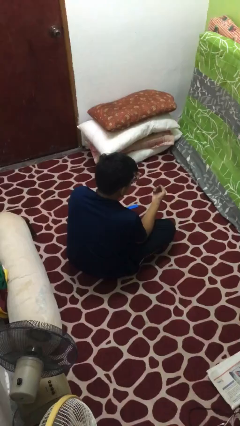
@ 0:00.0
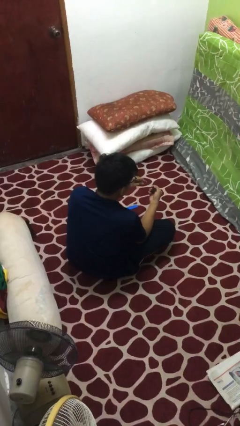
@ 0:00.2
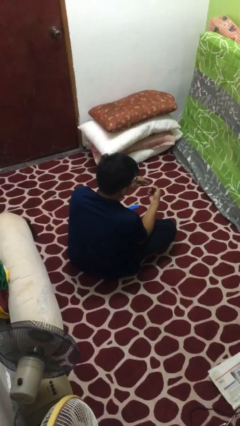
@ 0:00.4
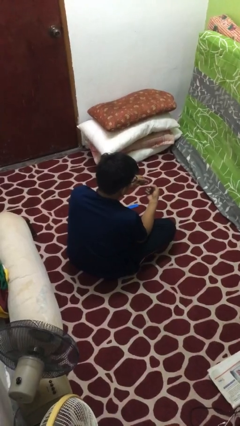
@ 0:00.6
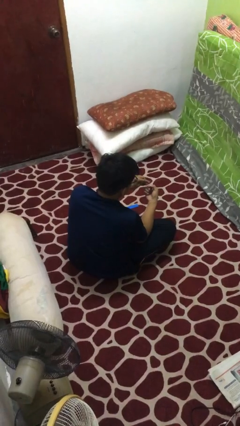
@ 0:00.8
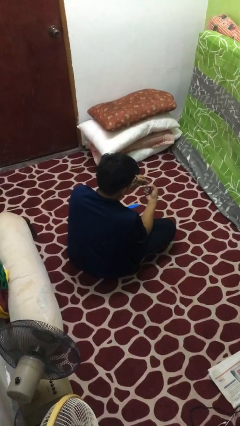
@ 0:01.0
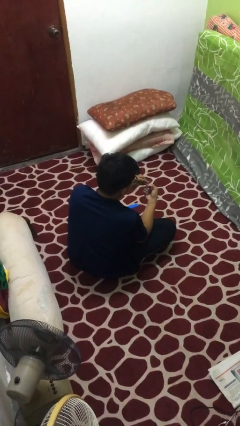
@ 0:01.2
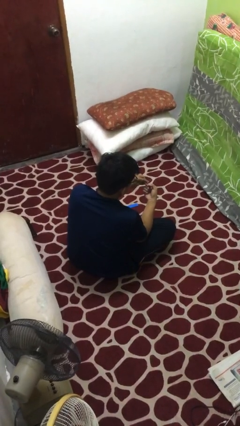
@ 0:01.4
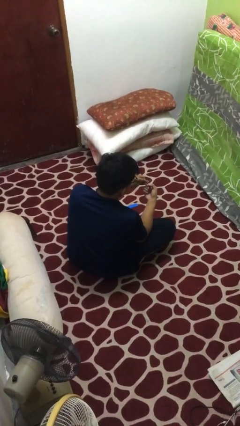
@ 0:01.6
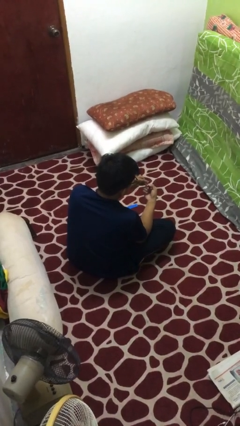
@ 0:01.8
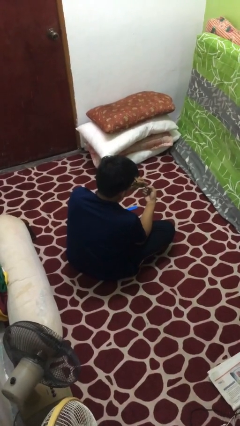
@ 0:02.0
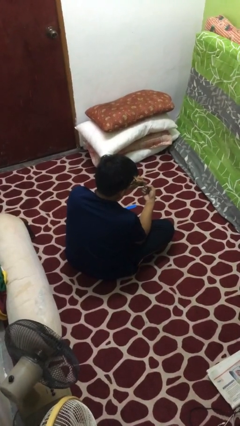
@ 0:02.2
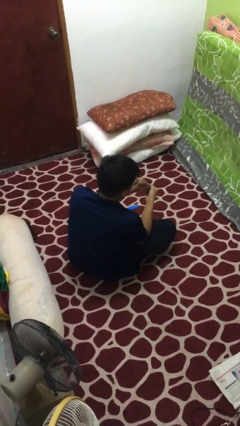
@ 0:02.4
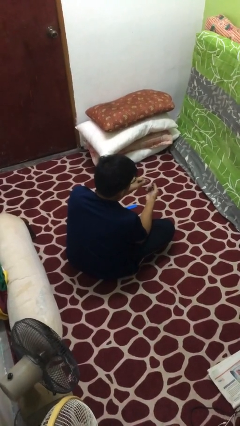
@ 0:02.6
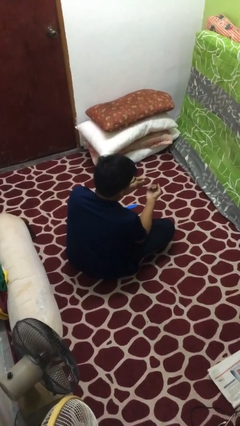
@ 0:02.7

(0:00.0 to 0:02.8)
person clips fingernails

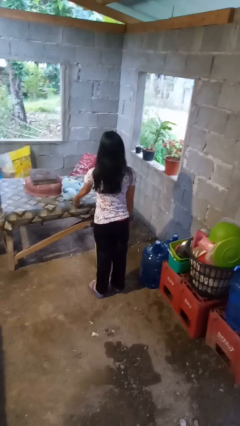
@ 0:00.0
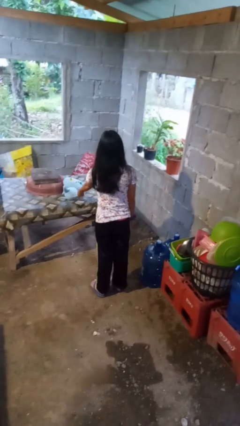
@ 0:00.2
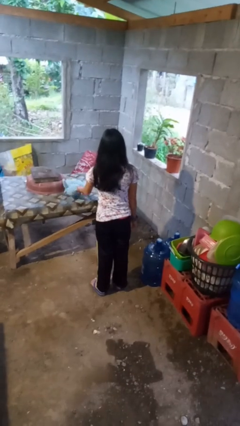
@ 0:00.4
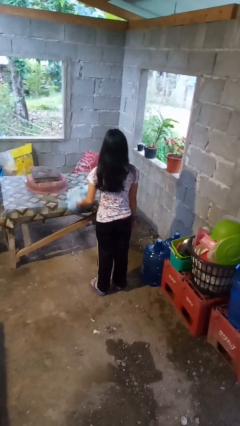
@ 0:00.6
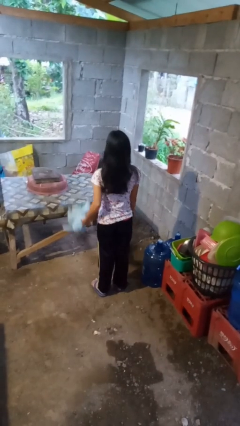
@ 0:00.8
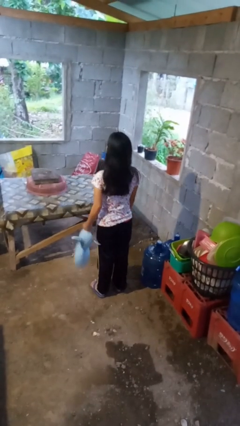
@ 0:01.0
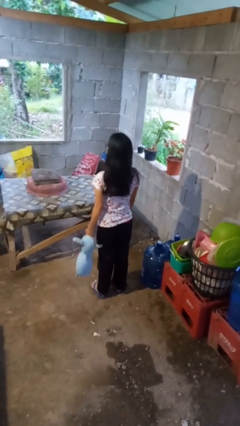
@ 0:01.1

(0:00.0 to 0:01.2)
person picks up object from table

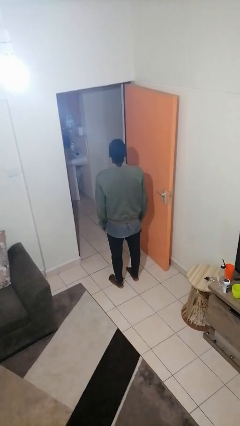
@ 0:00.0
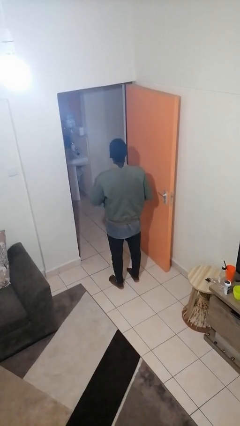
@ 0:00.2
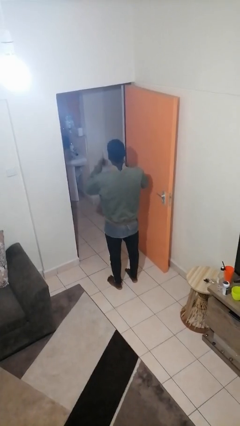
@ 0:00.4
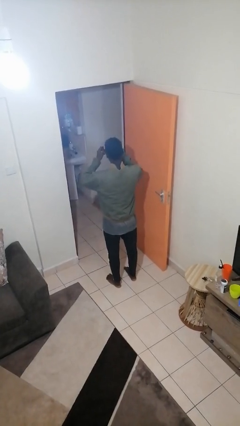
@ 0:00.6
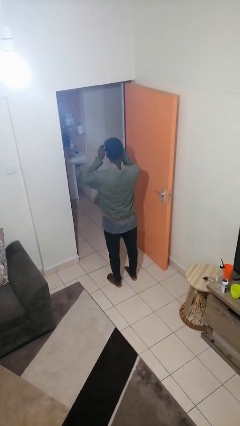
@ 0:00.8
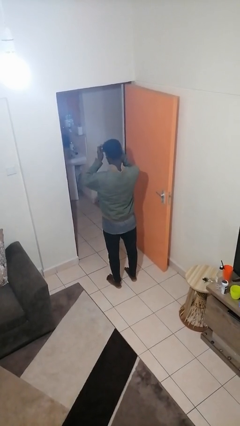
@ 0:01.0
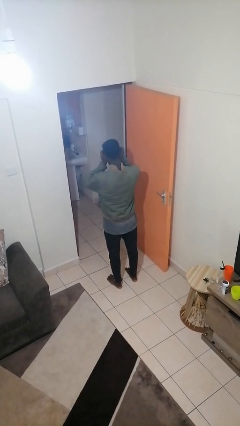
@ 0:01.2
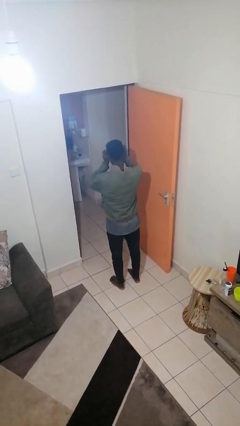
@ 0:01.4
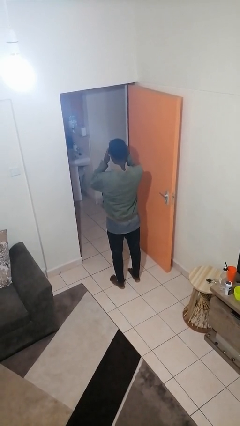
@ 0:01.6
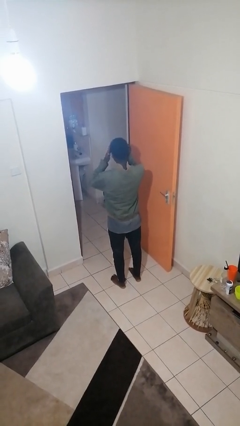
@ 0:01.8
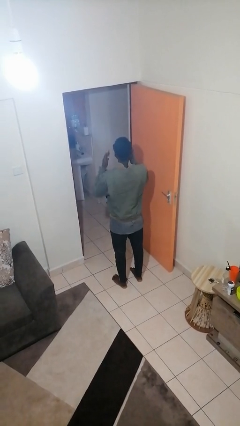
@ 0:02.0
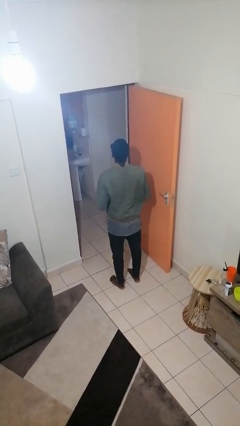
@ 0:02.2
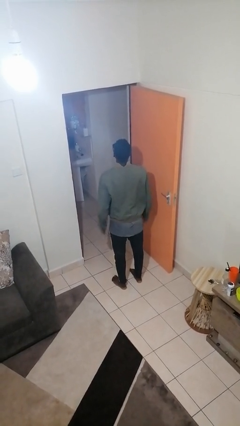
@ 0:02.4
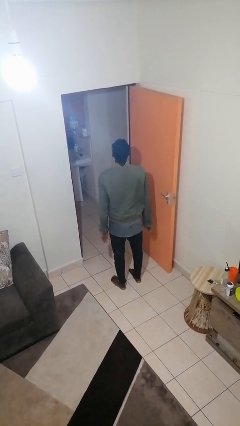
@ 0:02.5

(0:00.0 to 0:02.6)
person puts on sunglasses

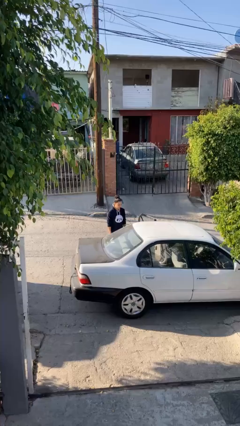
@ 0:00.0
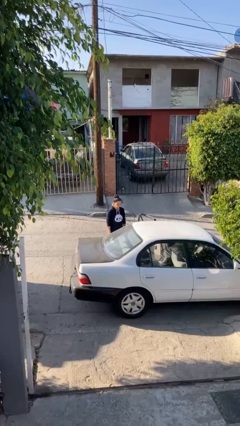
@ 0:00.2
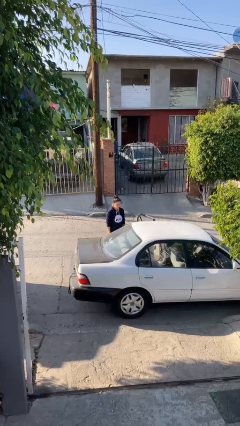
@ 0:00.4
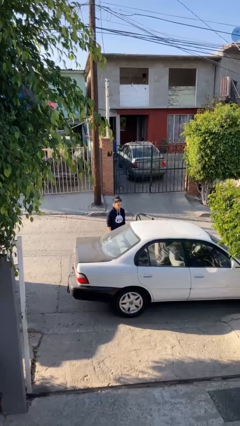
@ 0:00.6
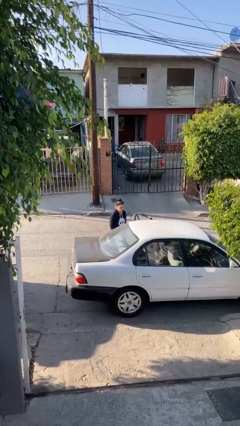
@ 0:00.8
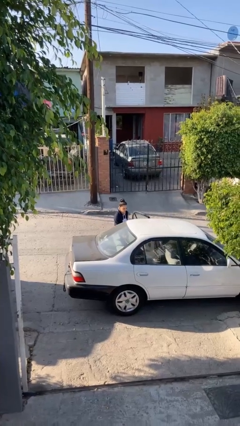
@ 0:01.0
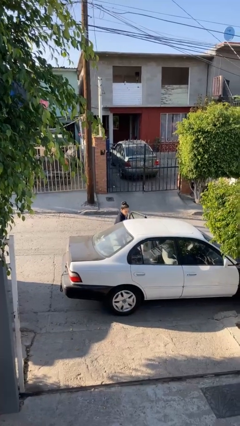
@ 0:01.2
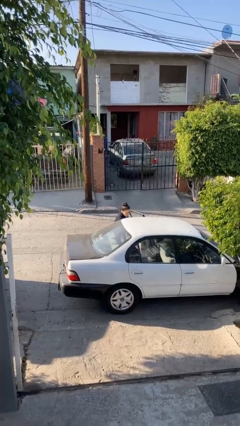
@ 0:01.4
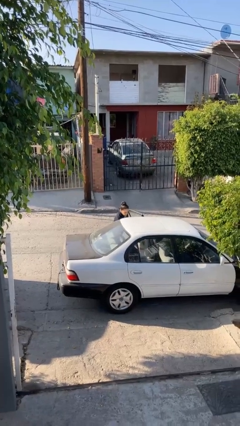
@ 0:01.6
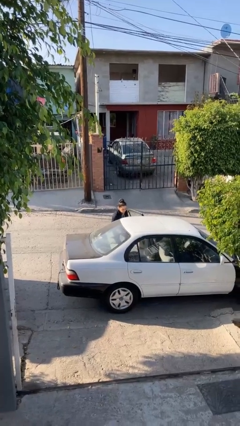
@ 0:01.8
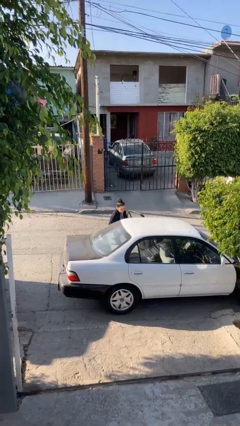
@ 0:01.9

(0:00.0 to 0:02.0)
person unloads car

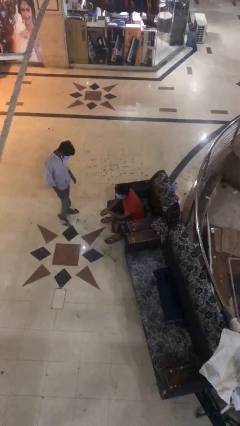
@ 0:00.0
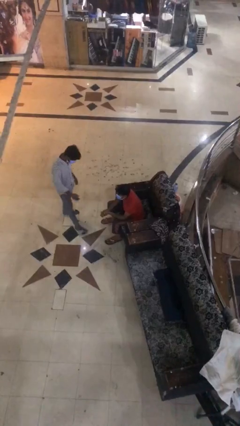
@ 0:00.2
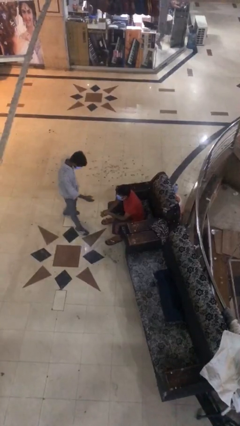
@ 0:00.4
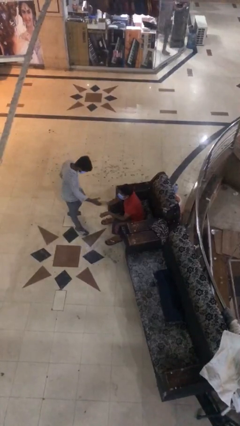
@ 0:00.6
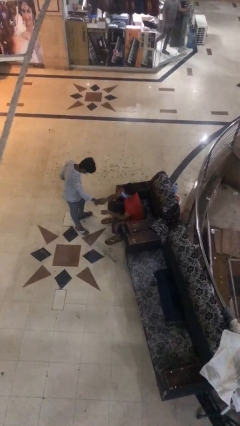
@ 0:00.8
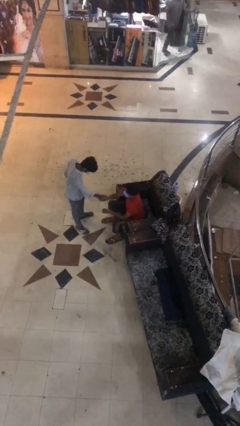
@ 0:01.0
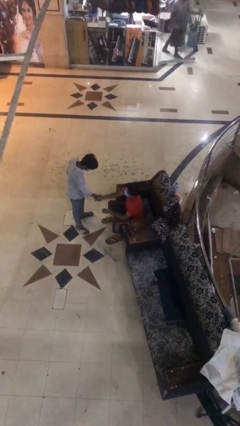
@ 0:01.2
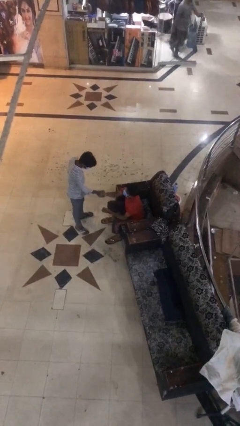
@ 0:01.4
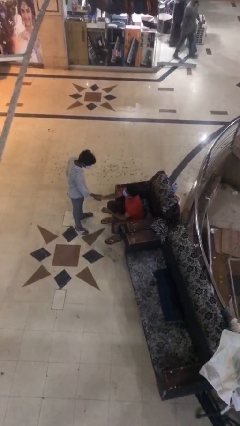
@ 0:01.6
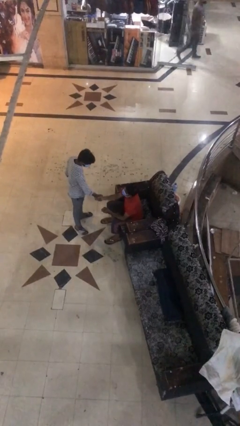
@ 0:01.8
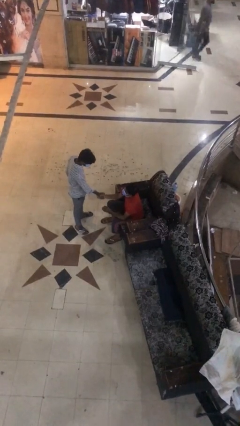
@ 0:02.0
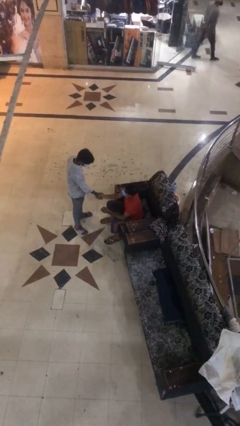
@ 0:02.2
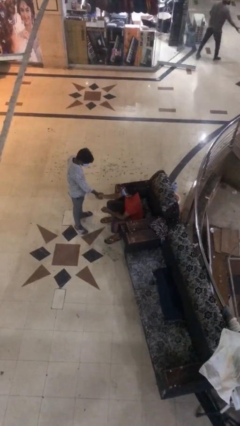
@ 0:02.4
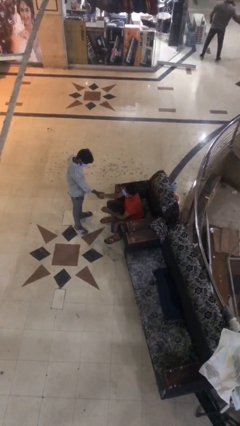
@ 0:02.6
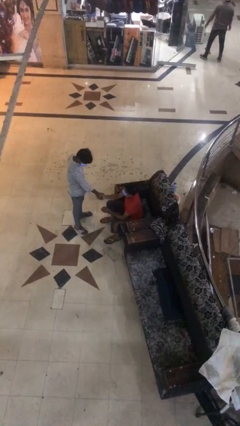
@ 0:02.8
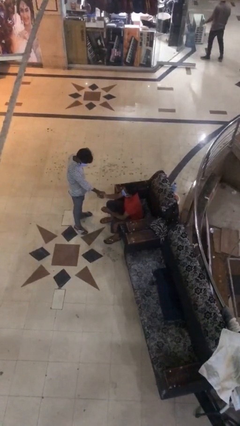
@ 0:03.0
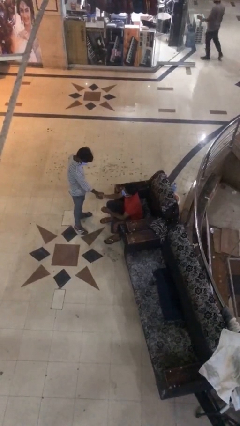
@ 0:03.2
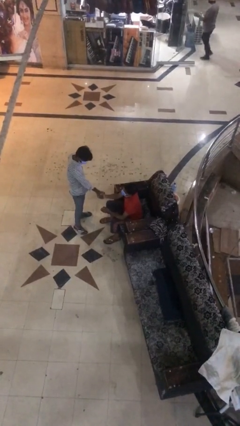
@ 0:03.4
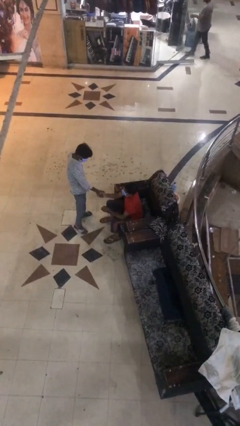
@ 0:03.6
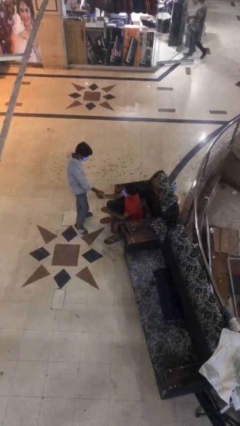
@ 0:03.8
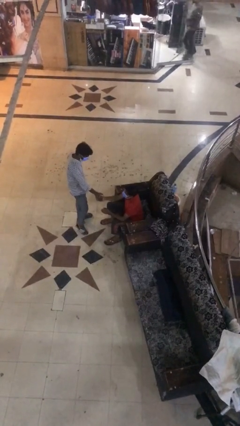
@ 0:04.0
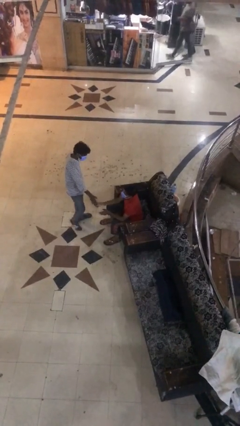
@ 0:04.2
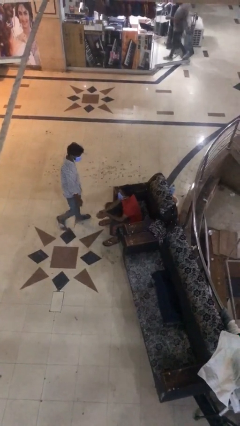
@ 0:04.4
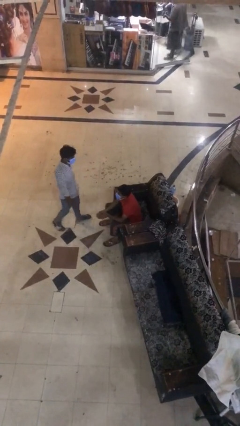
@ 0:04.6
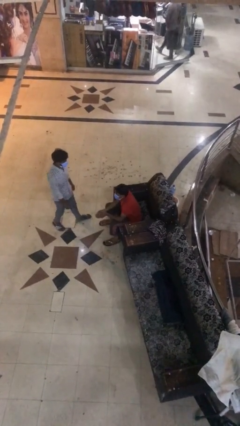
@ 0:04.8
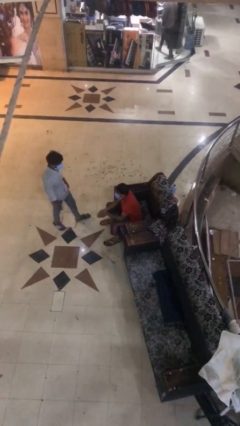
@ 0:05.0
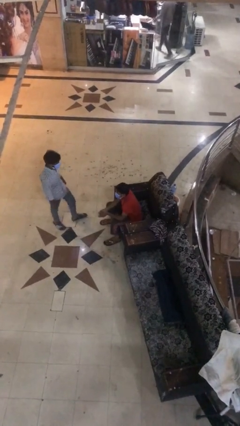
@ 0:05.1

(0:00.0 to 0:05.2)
person shakes hand

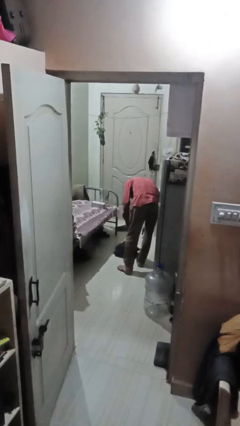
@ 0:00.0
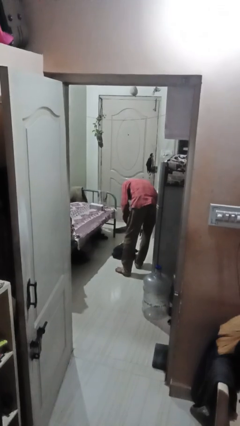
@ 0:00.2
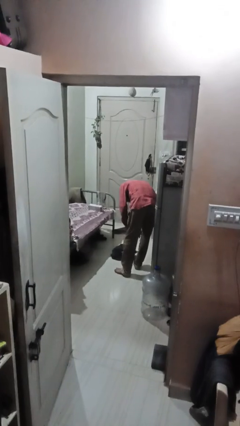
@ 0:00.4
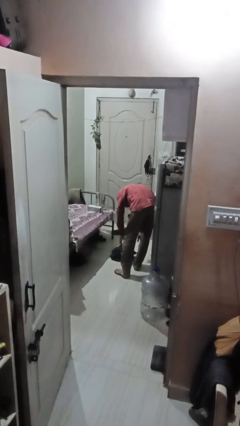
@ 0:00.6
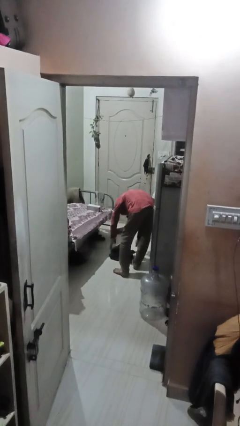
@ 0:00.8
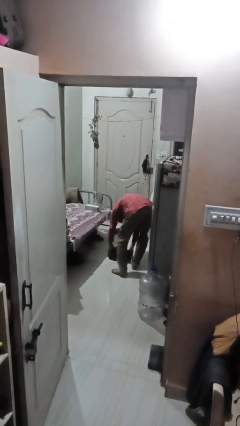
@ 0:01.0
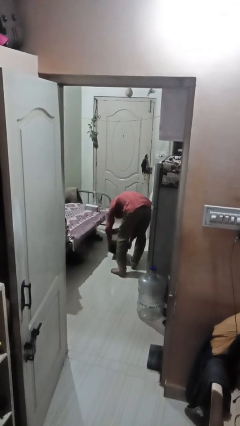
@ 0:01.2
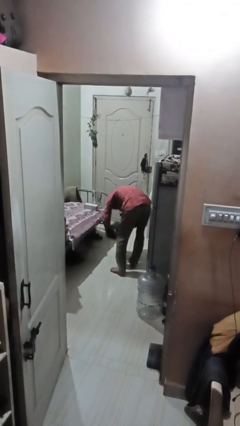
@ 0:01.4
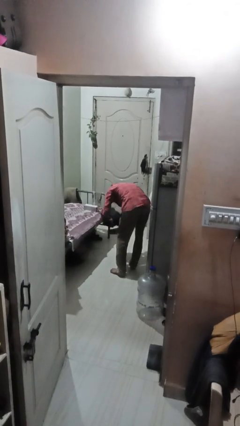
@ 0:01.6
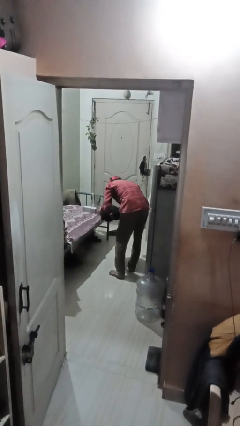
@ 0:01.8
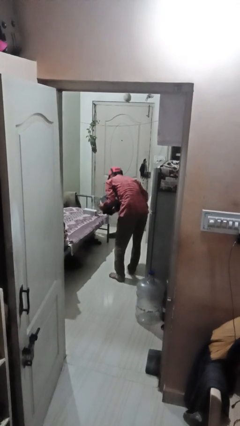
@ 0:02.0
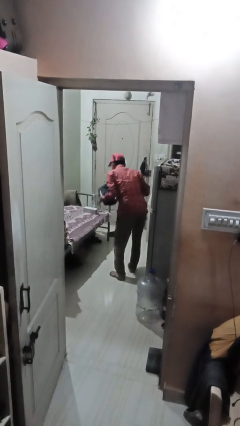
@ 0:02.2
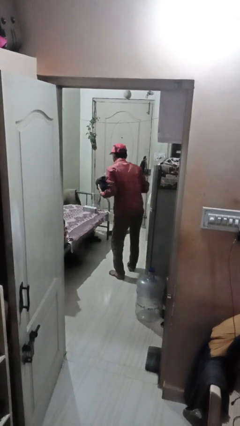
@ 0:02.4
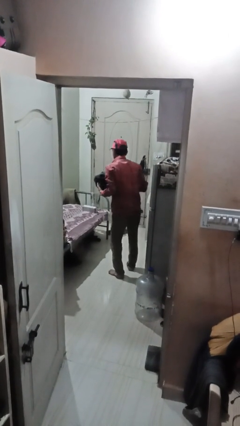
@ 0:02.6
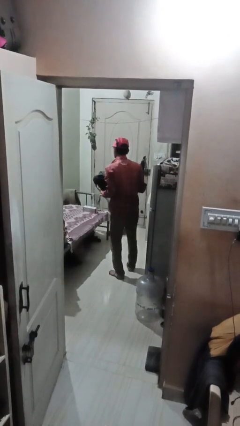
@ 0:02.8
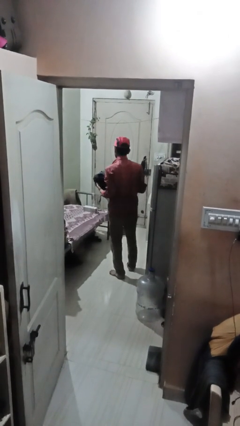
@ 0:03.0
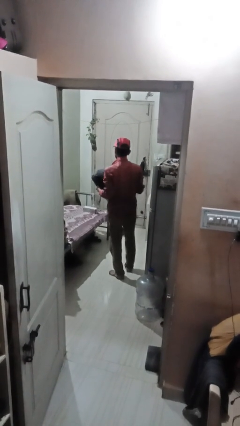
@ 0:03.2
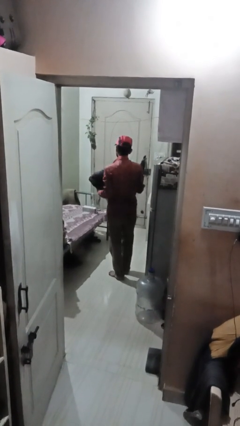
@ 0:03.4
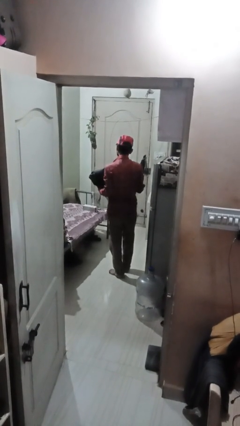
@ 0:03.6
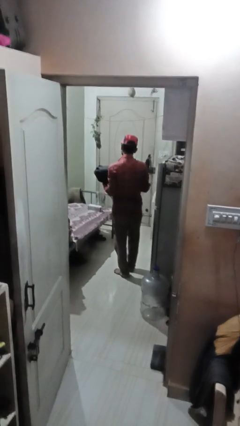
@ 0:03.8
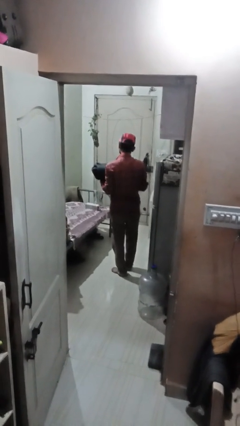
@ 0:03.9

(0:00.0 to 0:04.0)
person picks up object from floor
